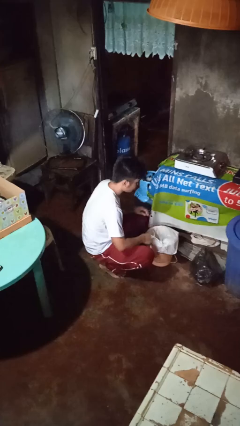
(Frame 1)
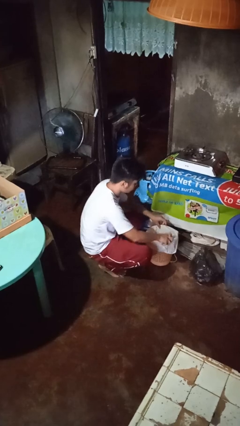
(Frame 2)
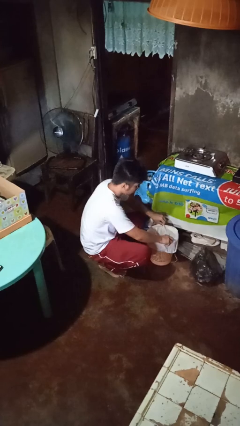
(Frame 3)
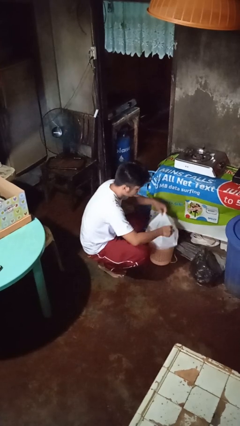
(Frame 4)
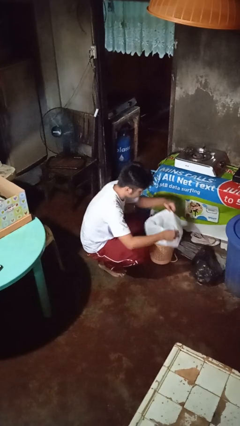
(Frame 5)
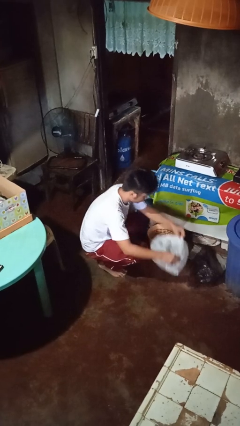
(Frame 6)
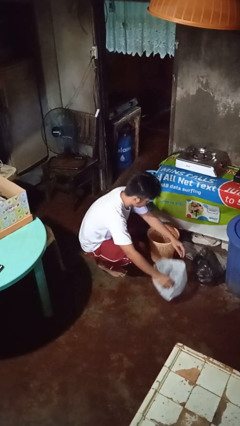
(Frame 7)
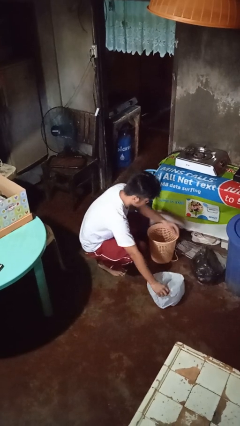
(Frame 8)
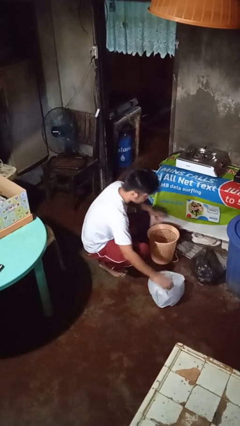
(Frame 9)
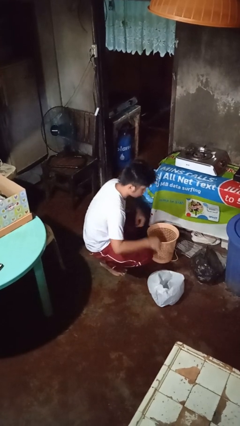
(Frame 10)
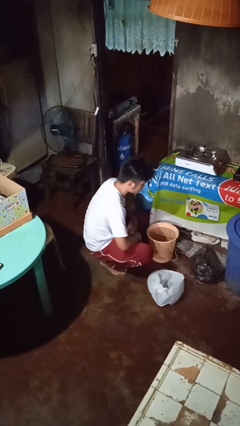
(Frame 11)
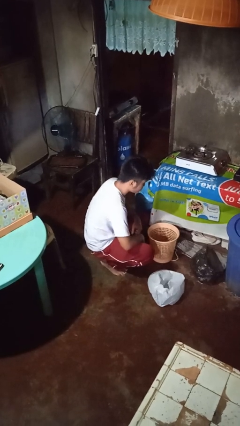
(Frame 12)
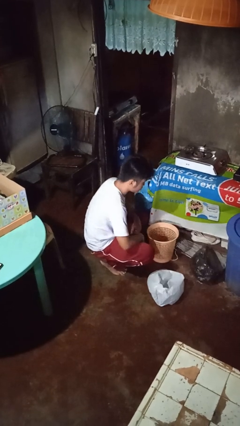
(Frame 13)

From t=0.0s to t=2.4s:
person removes trashbag from trashcan

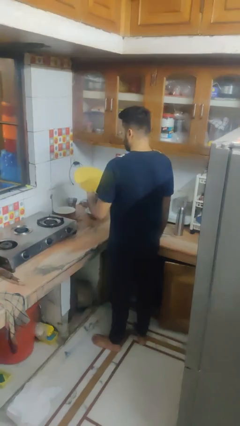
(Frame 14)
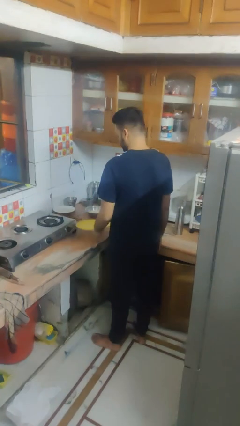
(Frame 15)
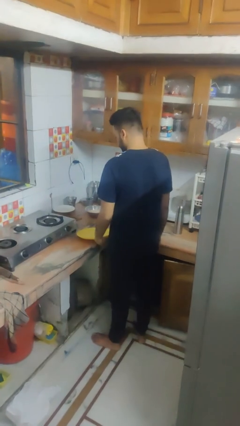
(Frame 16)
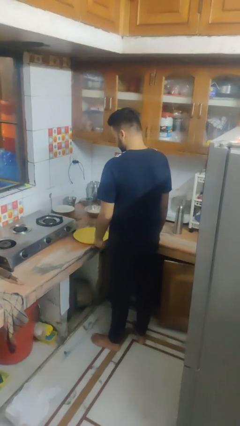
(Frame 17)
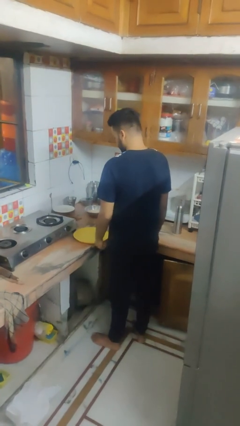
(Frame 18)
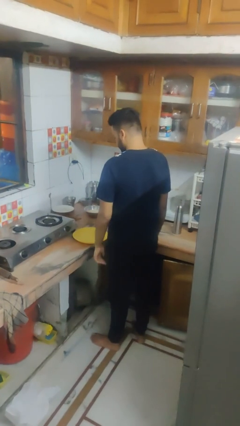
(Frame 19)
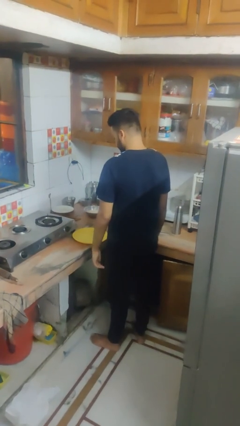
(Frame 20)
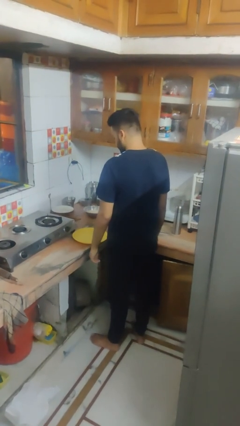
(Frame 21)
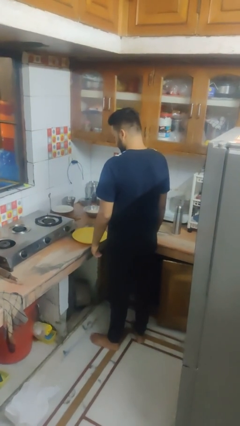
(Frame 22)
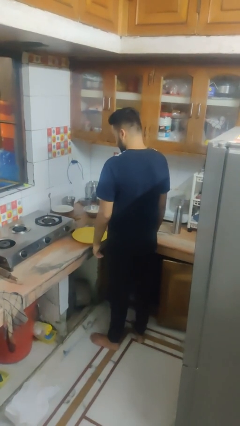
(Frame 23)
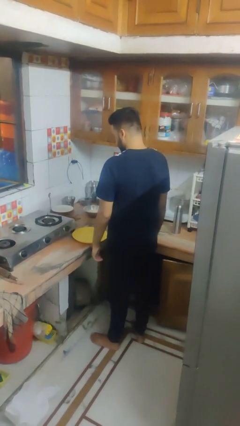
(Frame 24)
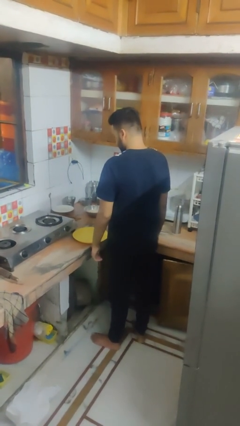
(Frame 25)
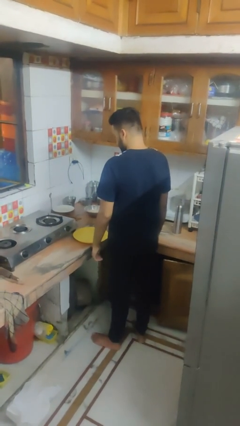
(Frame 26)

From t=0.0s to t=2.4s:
person puts down object on countertop

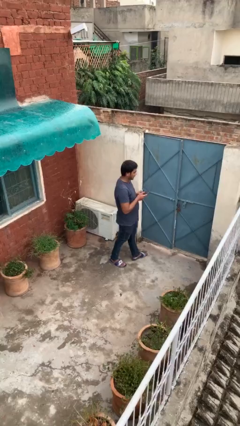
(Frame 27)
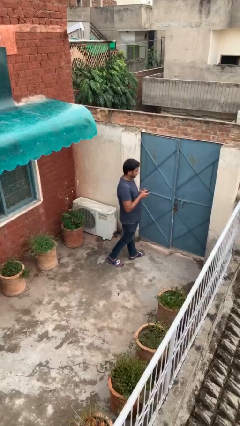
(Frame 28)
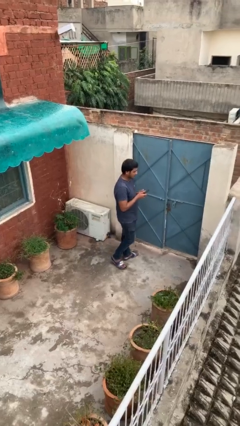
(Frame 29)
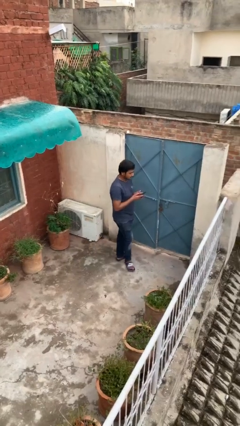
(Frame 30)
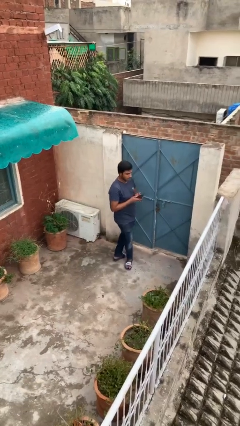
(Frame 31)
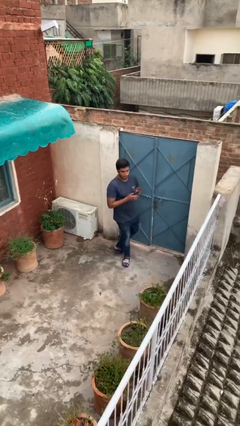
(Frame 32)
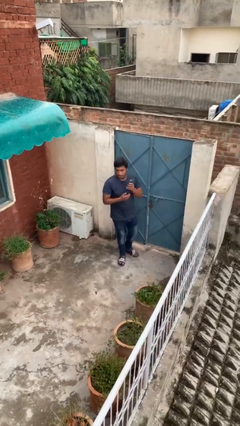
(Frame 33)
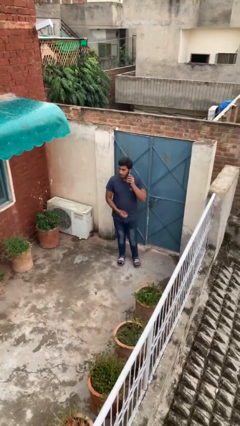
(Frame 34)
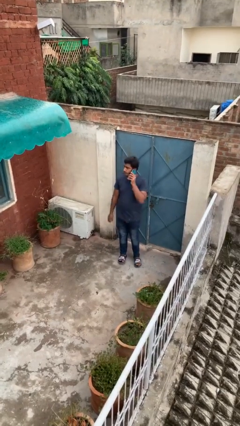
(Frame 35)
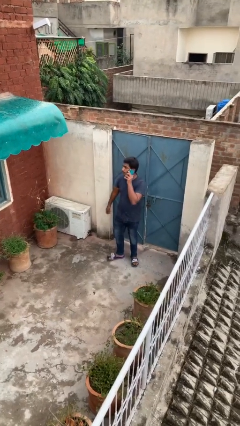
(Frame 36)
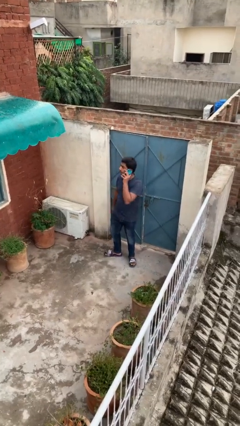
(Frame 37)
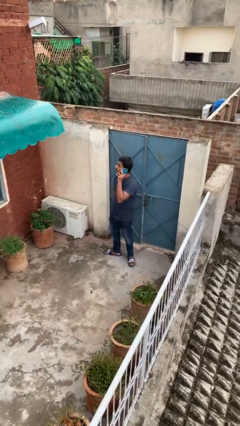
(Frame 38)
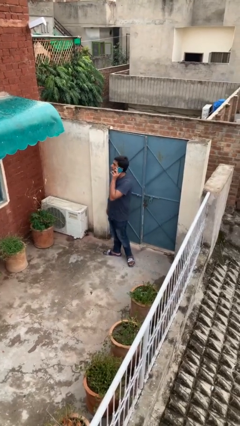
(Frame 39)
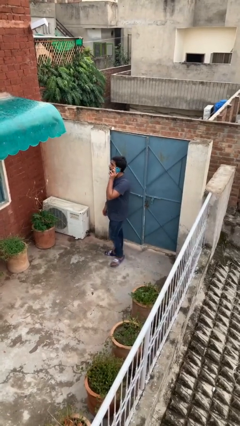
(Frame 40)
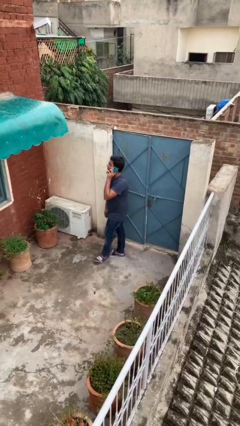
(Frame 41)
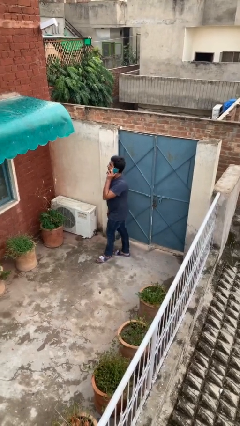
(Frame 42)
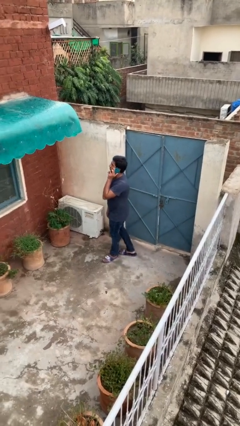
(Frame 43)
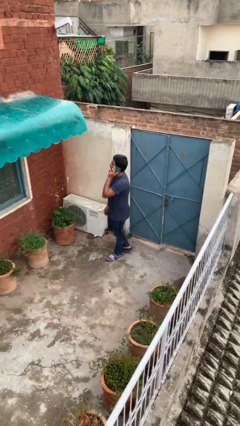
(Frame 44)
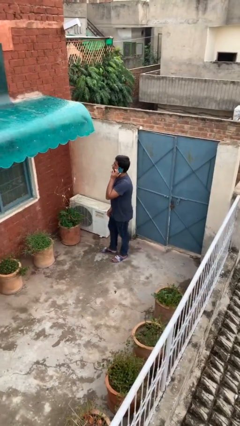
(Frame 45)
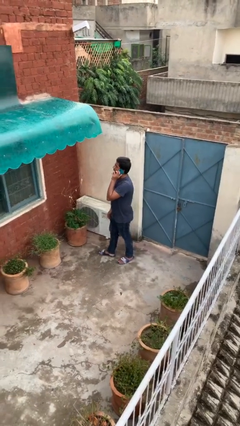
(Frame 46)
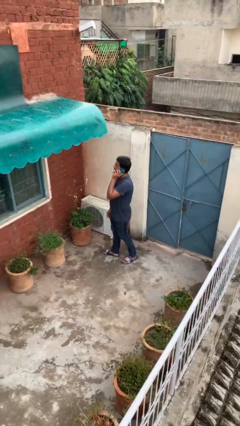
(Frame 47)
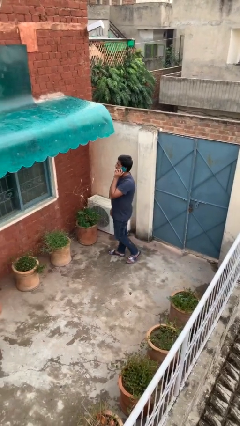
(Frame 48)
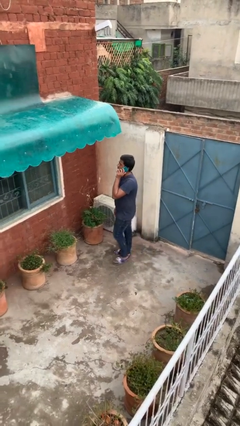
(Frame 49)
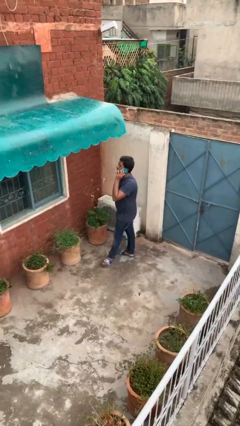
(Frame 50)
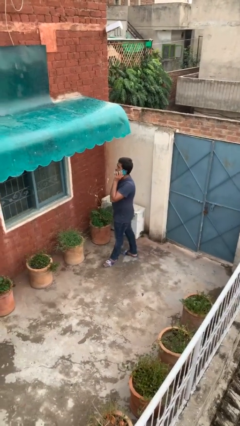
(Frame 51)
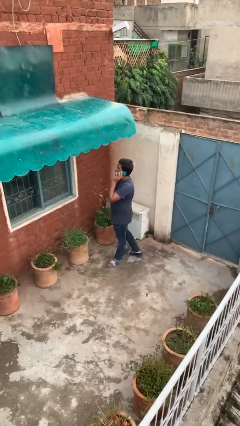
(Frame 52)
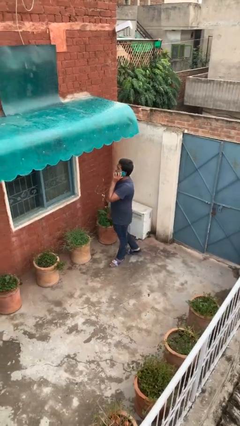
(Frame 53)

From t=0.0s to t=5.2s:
person talks on phone

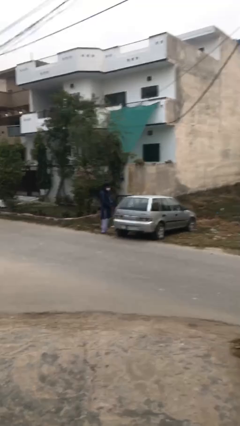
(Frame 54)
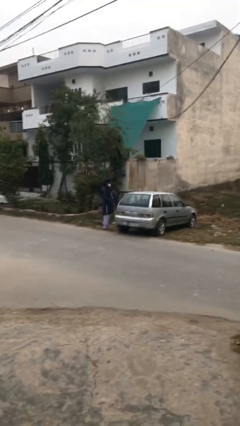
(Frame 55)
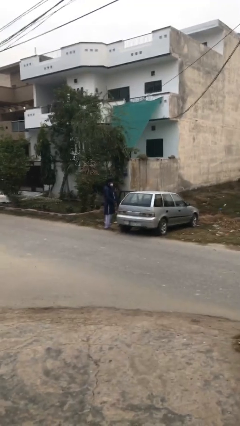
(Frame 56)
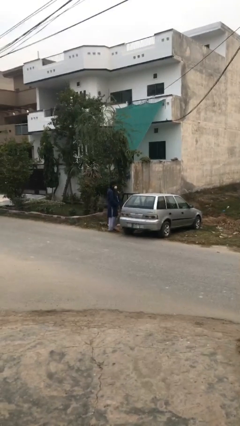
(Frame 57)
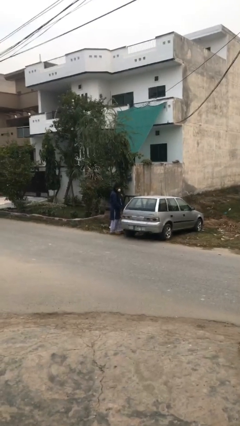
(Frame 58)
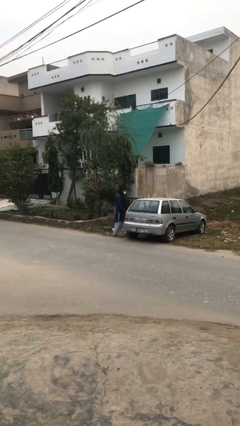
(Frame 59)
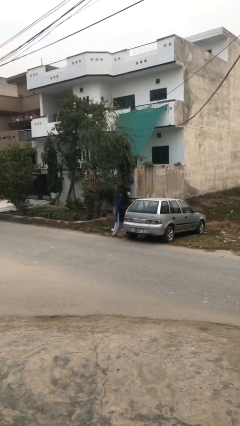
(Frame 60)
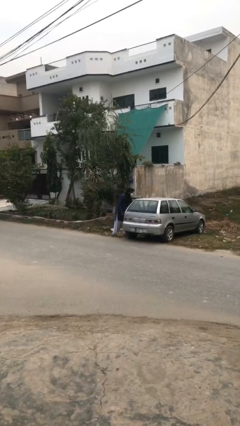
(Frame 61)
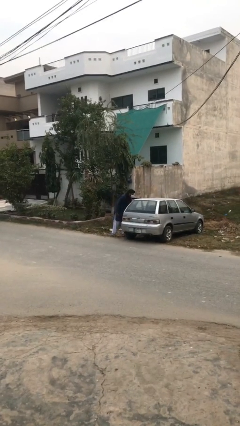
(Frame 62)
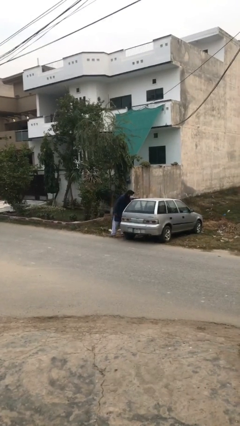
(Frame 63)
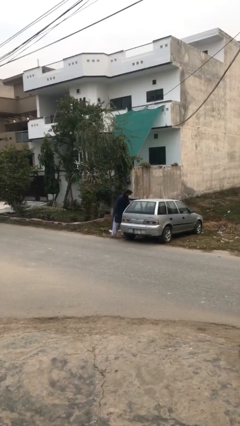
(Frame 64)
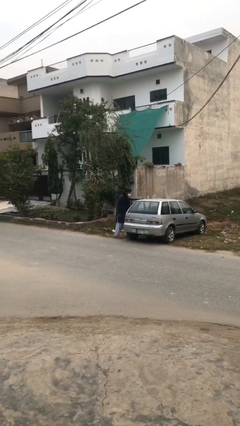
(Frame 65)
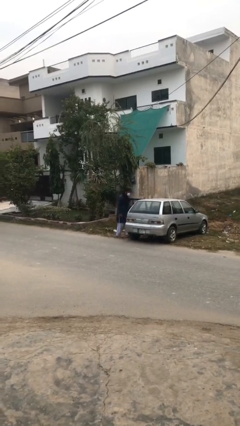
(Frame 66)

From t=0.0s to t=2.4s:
person loads car

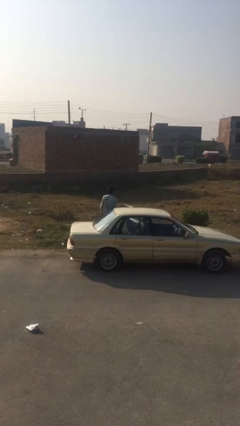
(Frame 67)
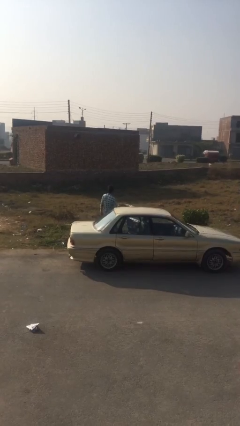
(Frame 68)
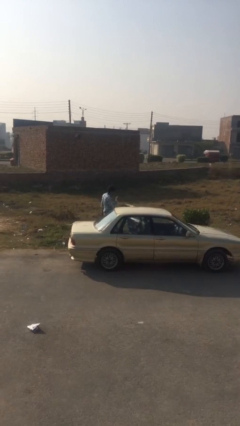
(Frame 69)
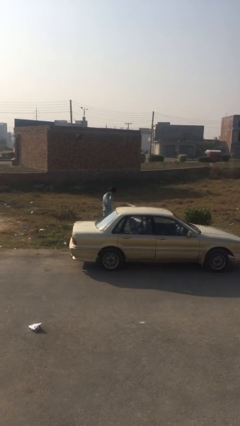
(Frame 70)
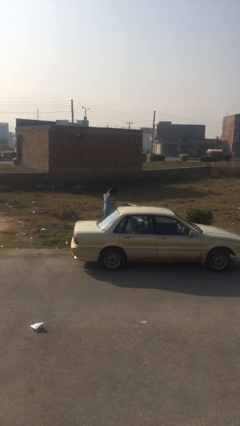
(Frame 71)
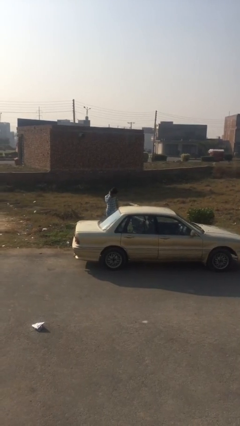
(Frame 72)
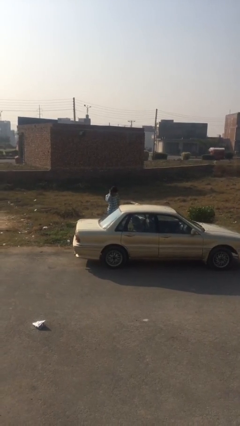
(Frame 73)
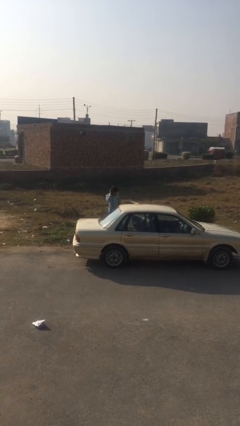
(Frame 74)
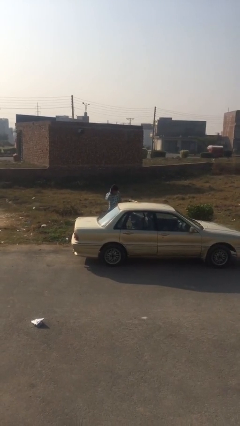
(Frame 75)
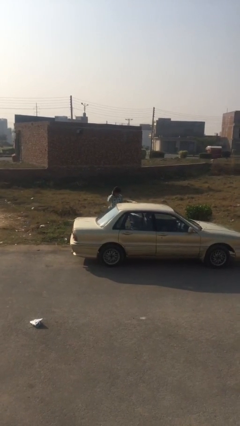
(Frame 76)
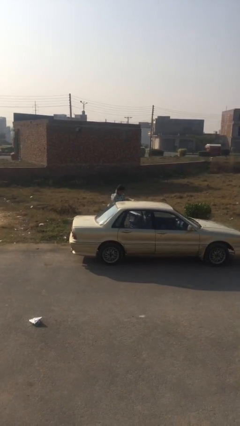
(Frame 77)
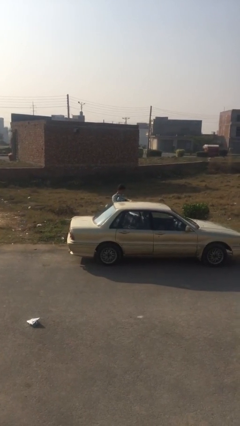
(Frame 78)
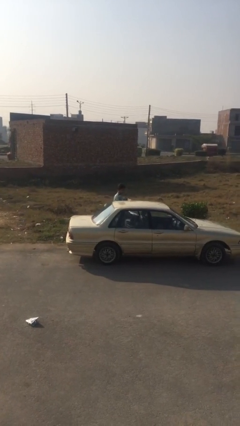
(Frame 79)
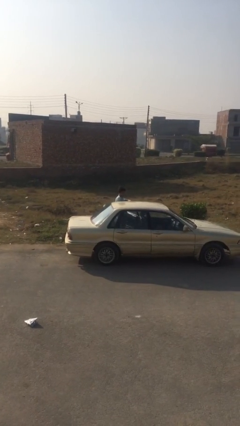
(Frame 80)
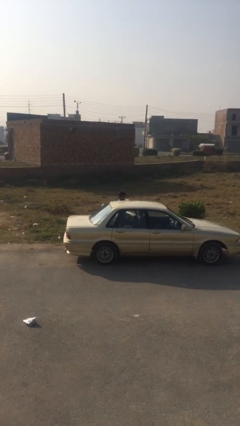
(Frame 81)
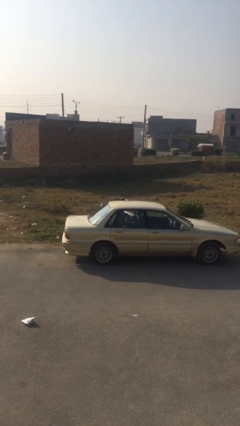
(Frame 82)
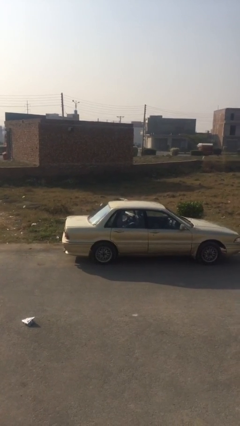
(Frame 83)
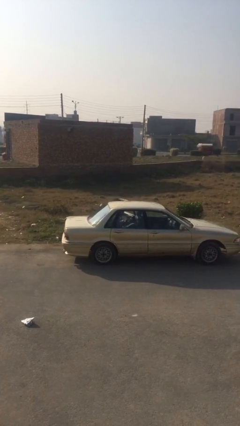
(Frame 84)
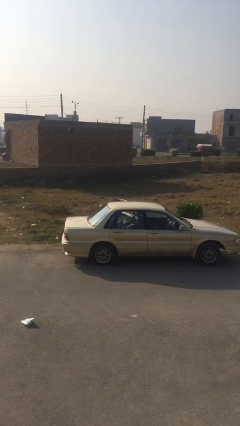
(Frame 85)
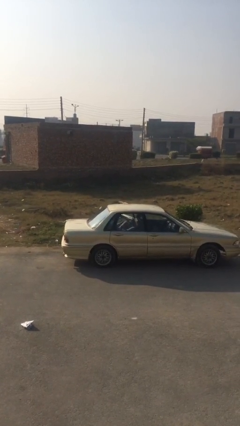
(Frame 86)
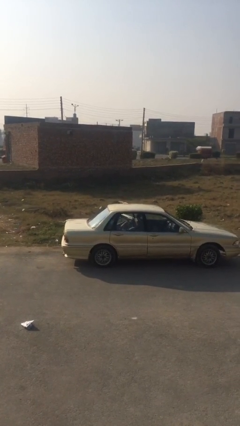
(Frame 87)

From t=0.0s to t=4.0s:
person enters car

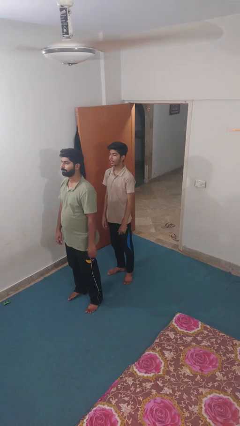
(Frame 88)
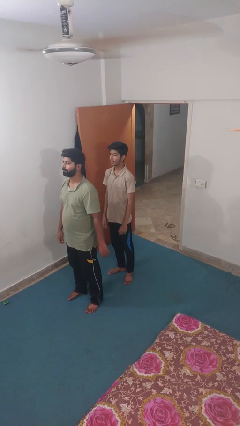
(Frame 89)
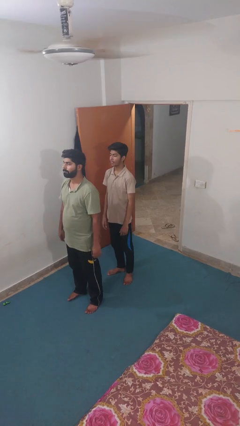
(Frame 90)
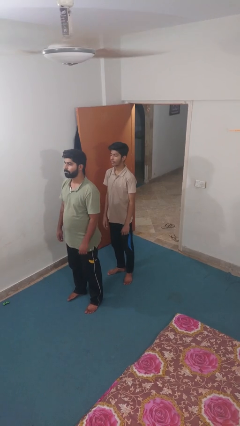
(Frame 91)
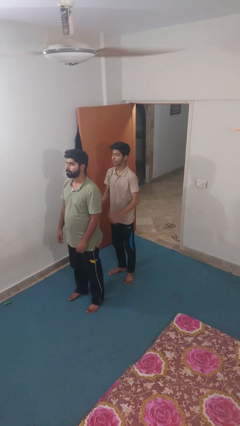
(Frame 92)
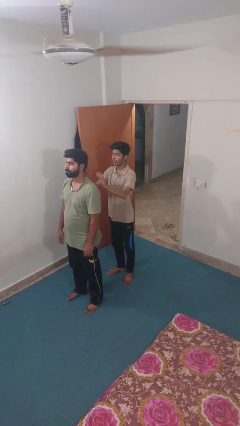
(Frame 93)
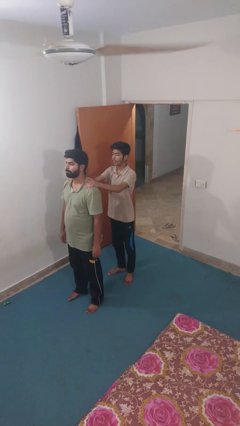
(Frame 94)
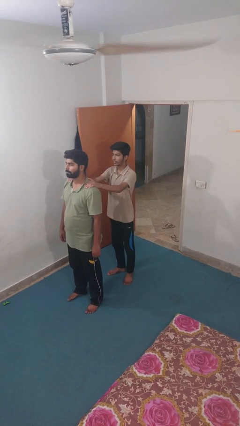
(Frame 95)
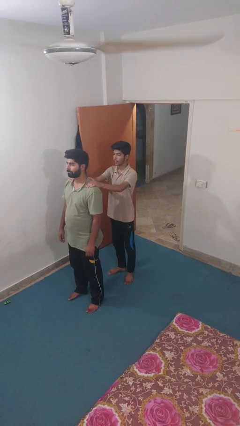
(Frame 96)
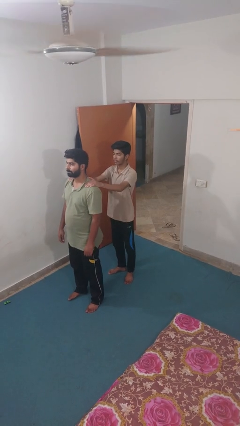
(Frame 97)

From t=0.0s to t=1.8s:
person grabs person by shoulder
